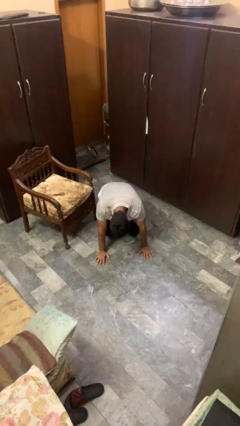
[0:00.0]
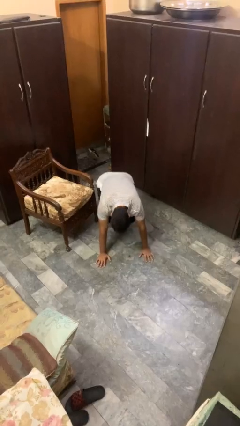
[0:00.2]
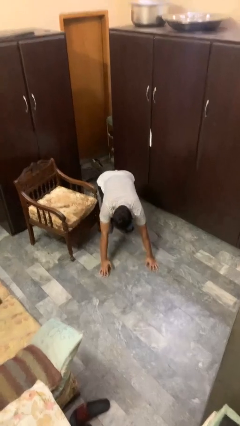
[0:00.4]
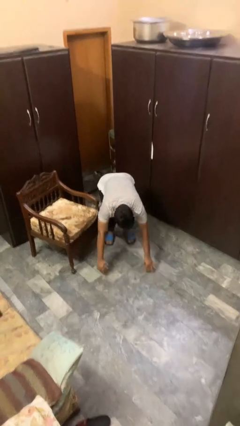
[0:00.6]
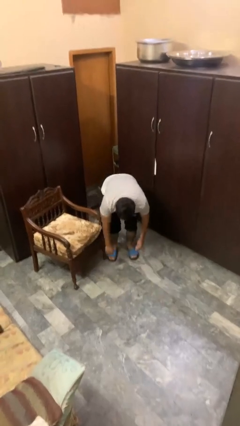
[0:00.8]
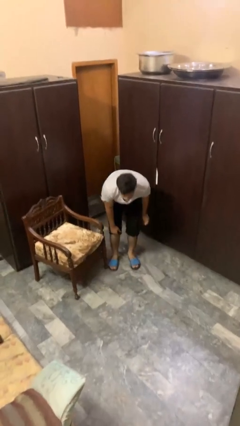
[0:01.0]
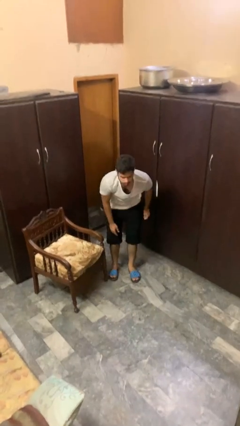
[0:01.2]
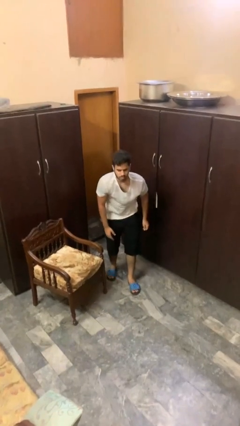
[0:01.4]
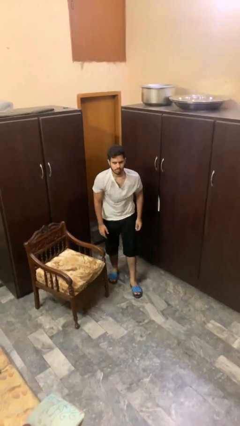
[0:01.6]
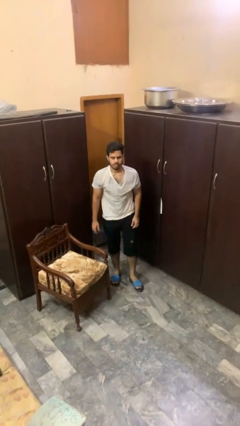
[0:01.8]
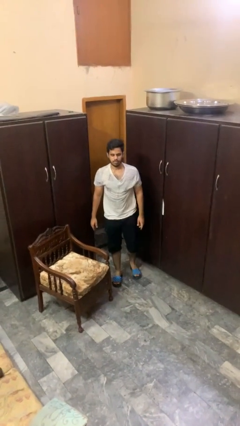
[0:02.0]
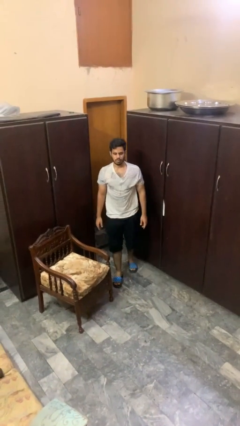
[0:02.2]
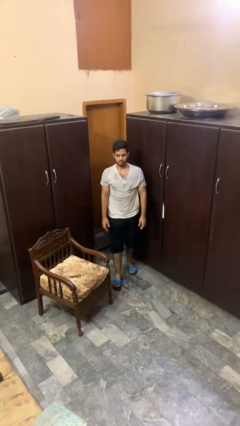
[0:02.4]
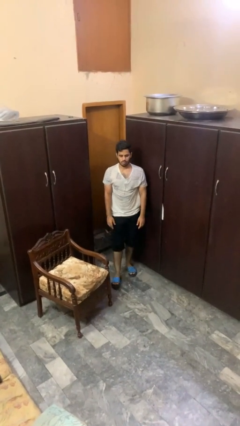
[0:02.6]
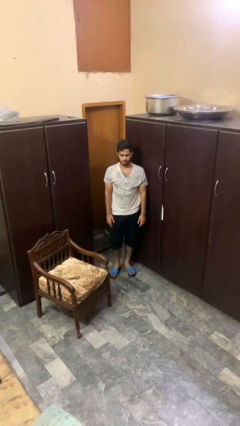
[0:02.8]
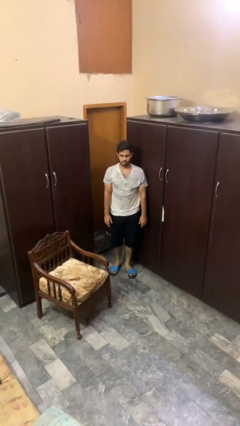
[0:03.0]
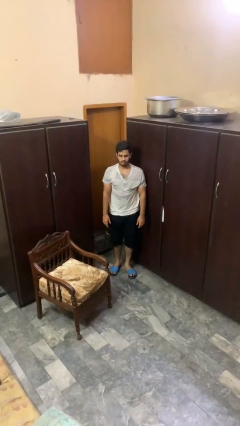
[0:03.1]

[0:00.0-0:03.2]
person stands up from floor

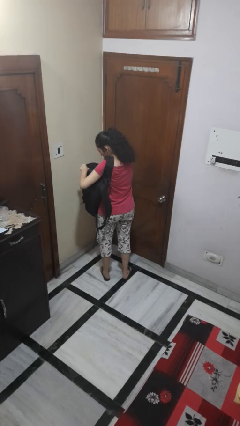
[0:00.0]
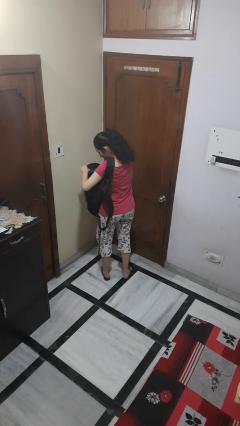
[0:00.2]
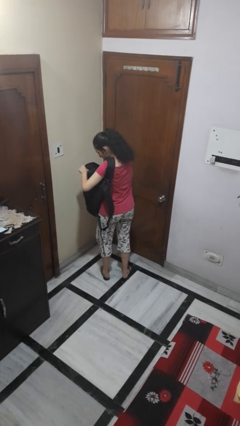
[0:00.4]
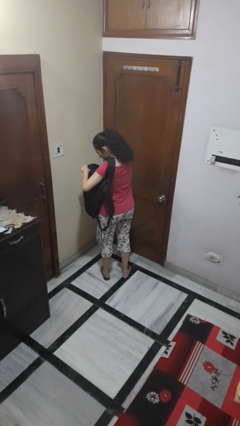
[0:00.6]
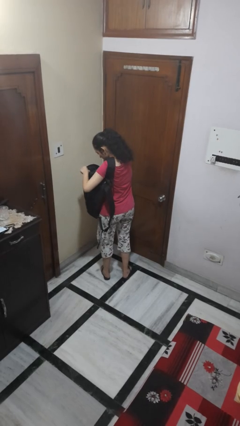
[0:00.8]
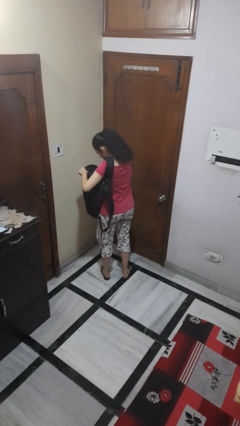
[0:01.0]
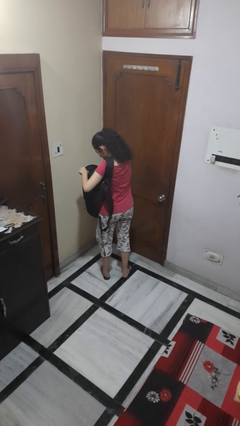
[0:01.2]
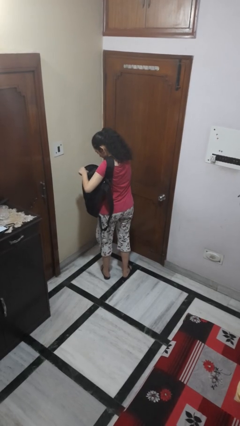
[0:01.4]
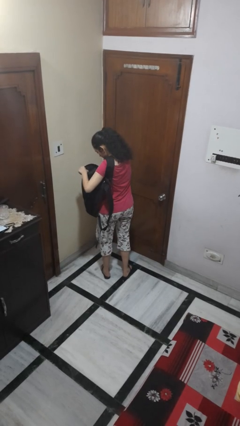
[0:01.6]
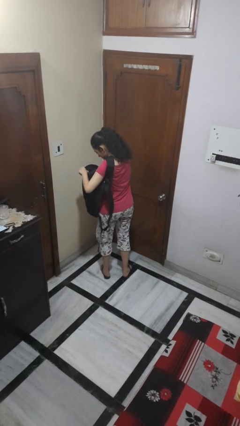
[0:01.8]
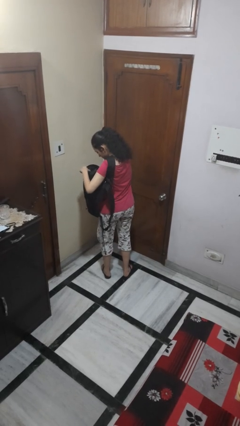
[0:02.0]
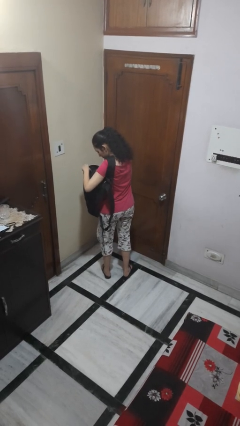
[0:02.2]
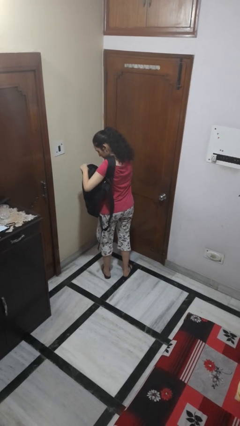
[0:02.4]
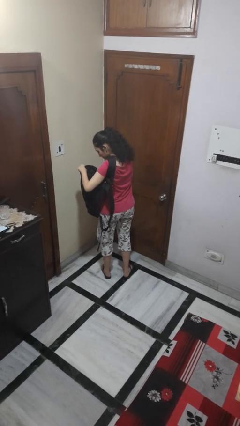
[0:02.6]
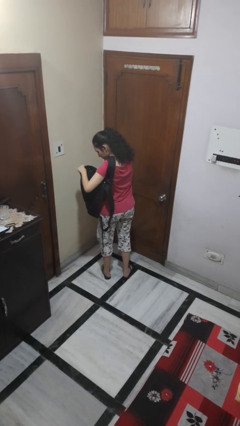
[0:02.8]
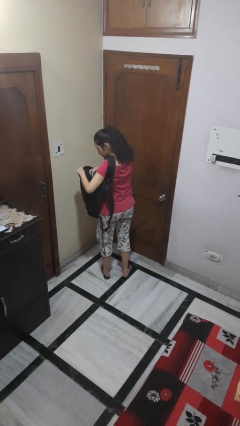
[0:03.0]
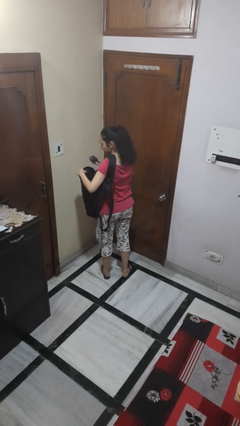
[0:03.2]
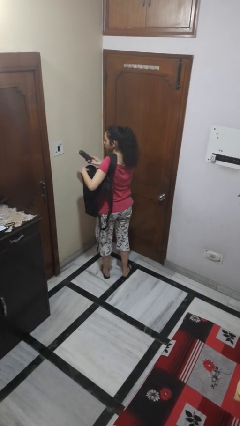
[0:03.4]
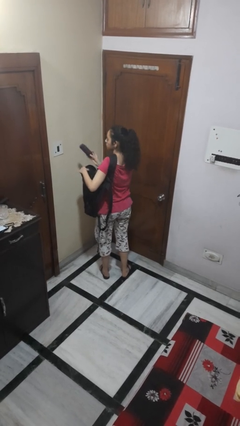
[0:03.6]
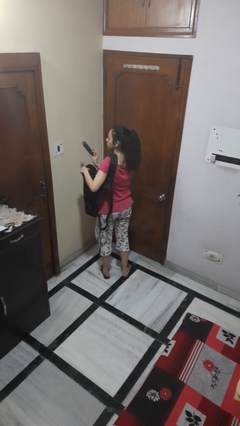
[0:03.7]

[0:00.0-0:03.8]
person searches in backpack

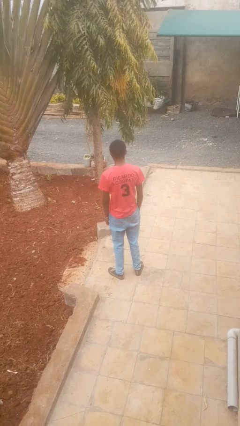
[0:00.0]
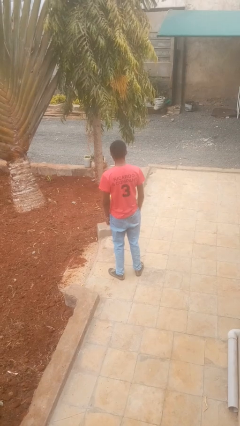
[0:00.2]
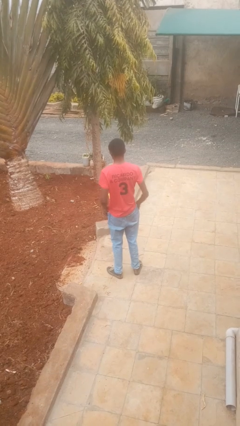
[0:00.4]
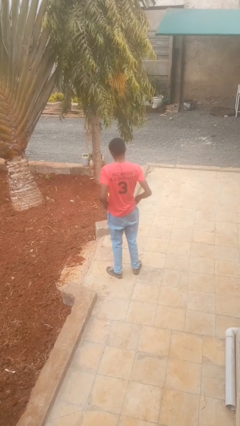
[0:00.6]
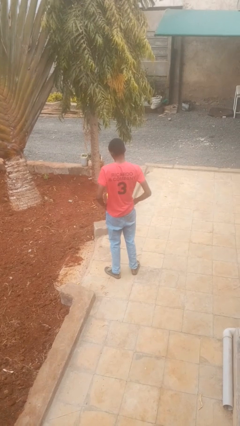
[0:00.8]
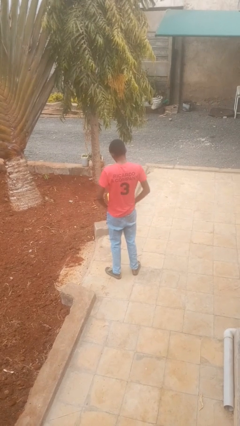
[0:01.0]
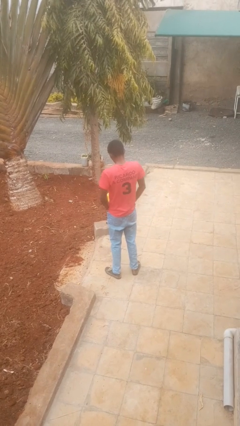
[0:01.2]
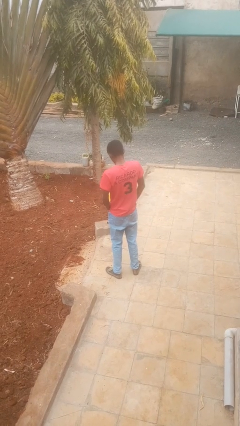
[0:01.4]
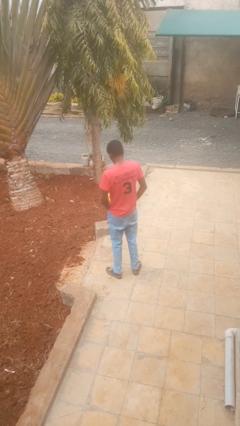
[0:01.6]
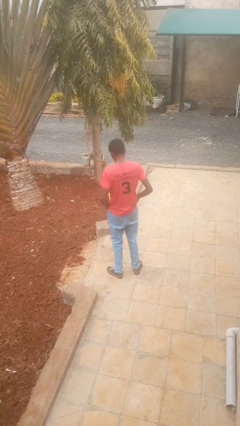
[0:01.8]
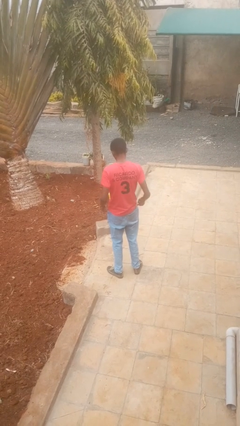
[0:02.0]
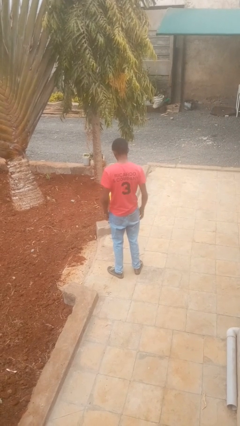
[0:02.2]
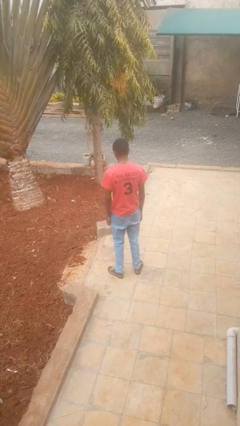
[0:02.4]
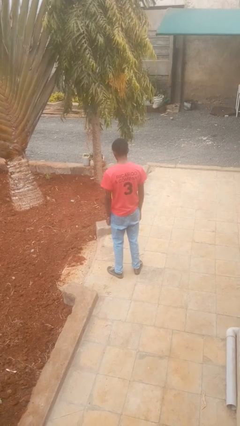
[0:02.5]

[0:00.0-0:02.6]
person puts hands in back pockets

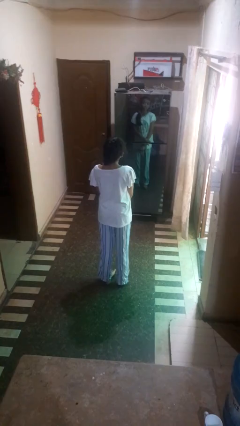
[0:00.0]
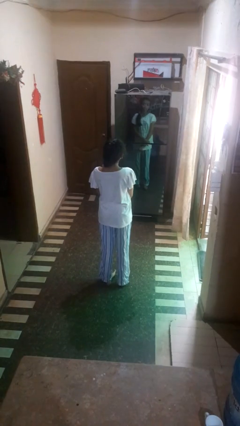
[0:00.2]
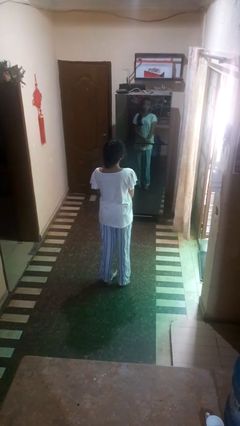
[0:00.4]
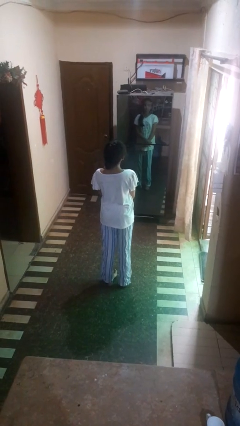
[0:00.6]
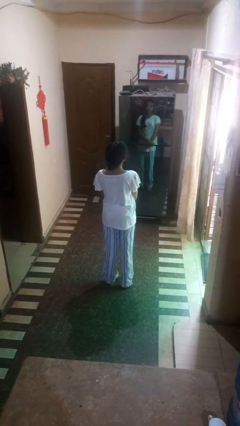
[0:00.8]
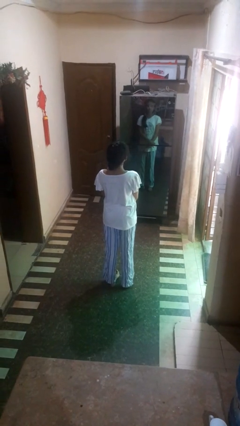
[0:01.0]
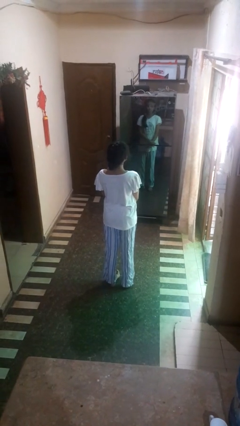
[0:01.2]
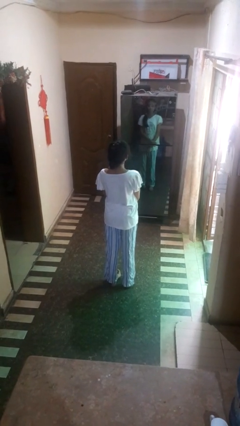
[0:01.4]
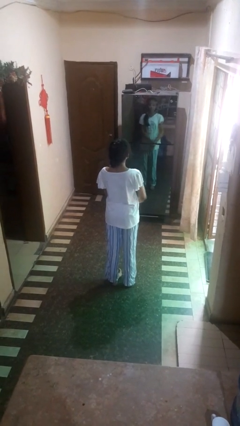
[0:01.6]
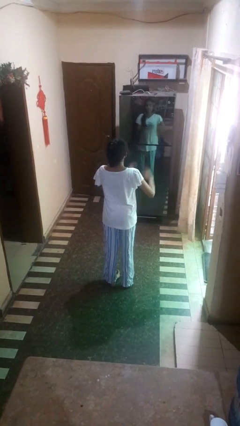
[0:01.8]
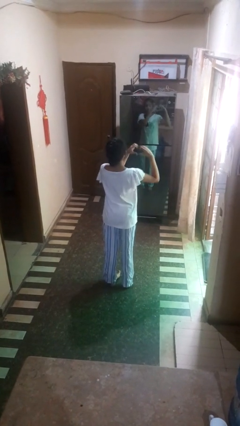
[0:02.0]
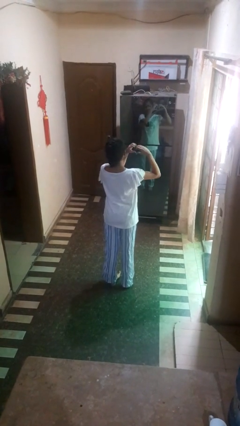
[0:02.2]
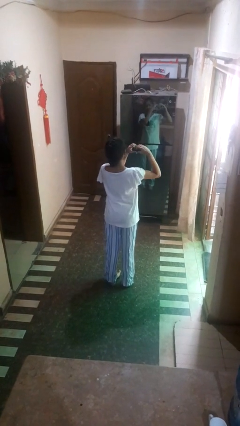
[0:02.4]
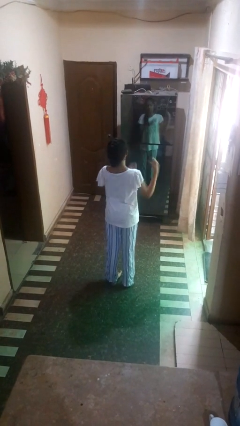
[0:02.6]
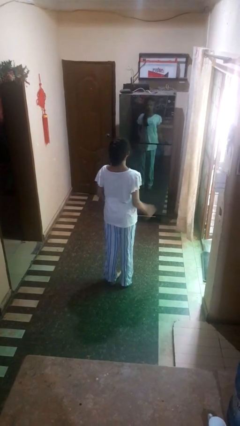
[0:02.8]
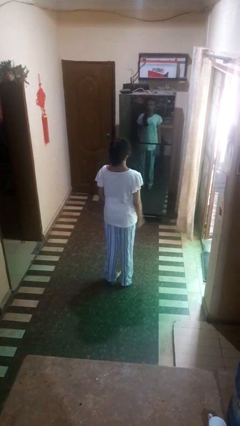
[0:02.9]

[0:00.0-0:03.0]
person gestures heart

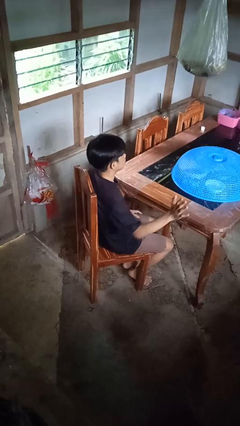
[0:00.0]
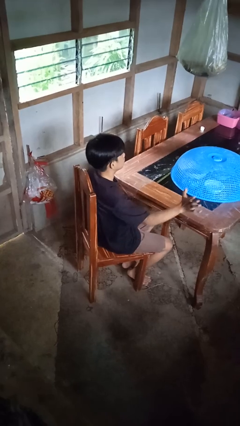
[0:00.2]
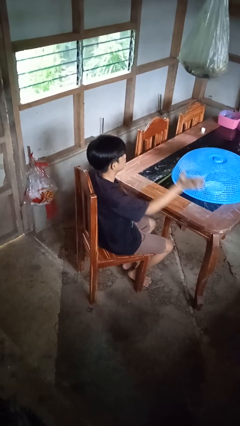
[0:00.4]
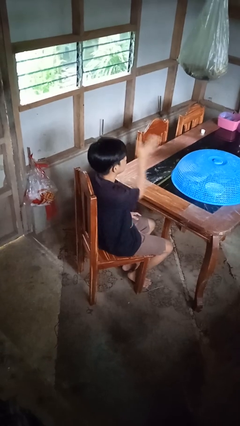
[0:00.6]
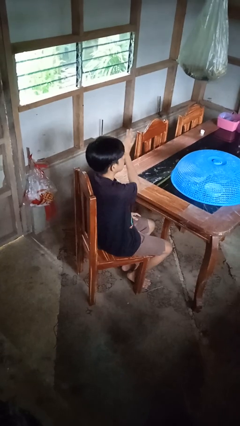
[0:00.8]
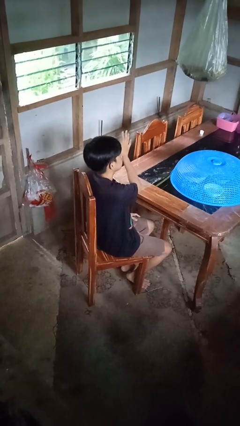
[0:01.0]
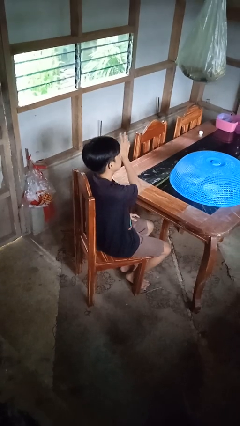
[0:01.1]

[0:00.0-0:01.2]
person gestures swipe right

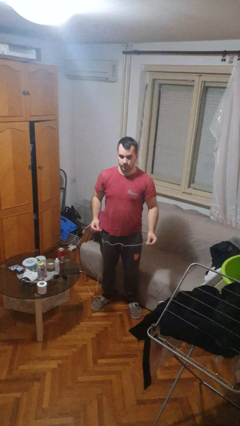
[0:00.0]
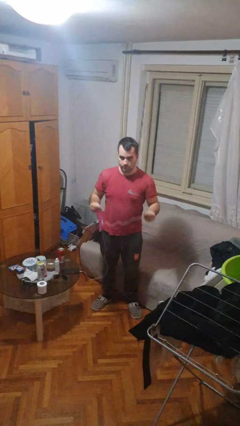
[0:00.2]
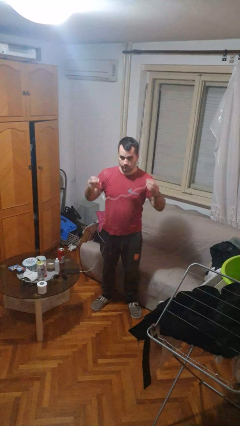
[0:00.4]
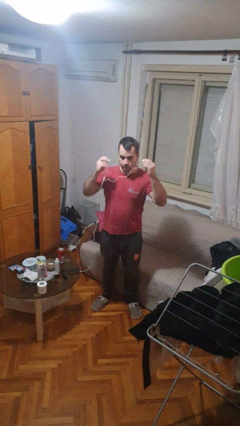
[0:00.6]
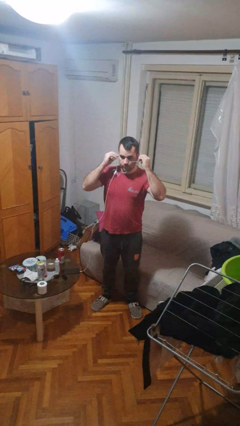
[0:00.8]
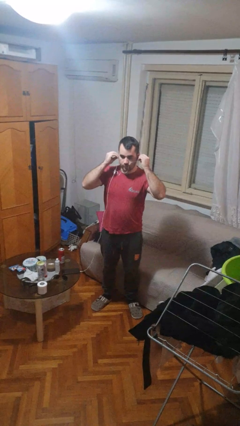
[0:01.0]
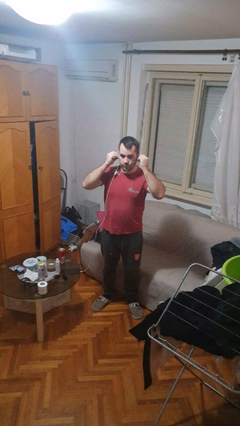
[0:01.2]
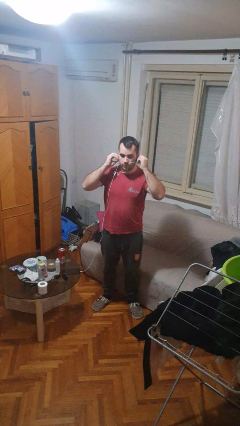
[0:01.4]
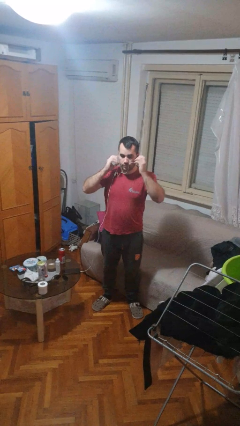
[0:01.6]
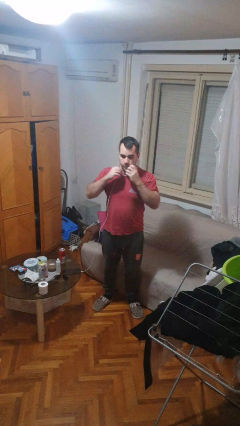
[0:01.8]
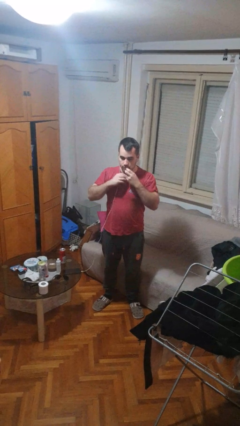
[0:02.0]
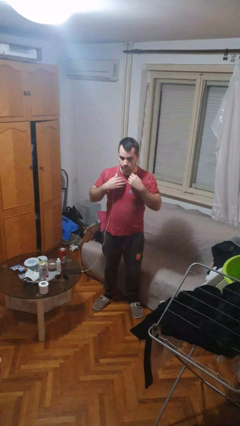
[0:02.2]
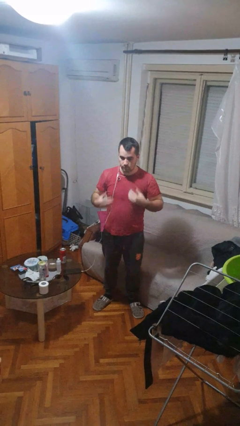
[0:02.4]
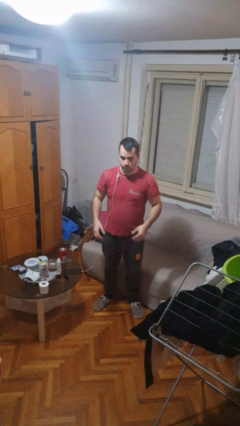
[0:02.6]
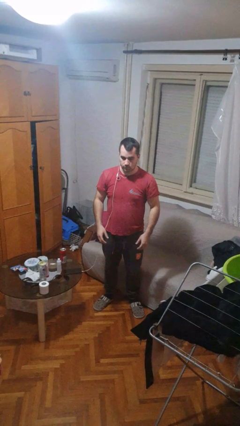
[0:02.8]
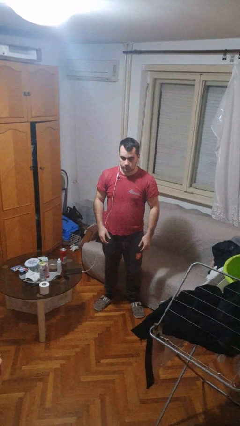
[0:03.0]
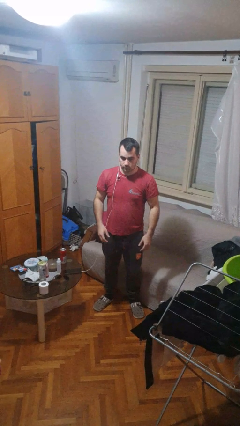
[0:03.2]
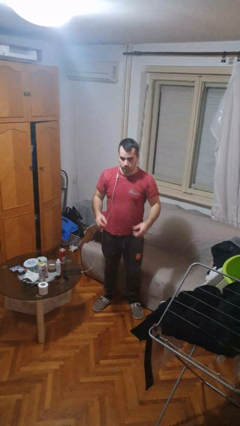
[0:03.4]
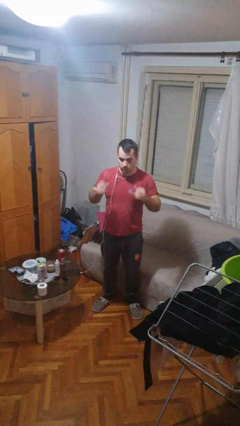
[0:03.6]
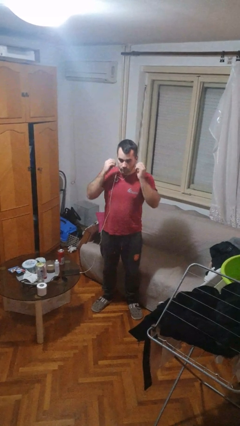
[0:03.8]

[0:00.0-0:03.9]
person puts on headphones

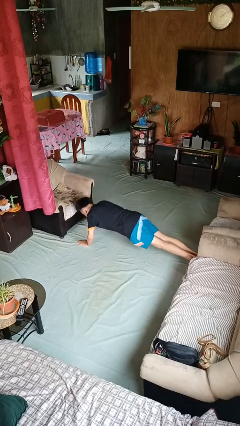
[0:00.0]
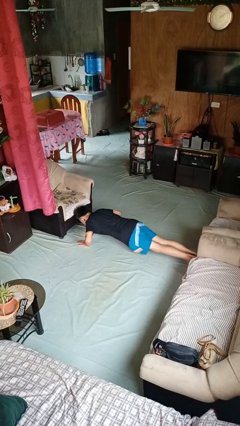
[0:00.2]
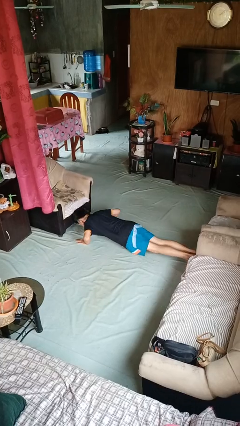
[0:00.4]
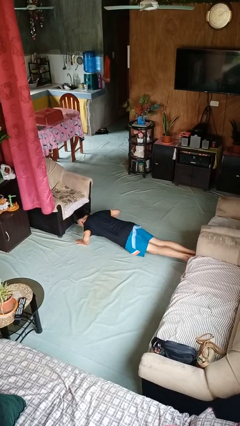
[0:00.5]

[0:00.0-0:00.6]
person exercises with pushup
